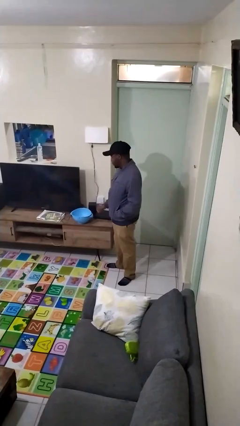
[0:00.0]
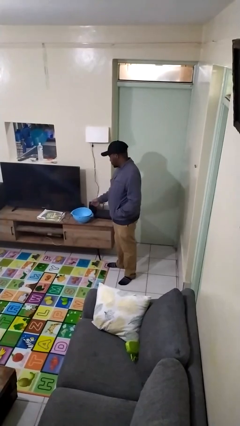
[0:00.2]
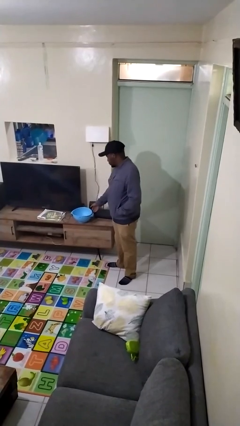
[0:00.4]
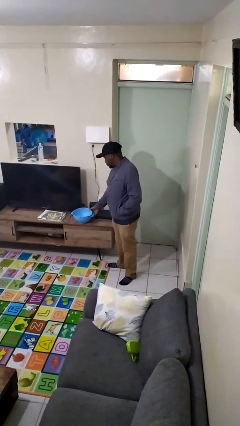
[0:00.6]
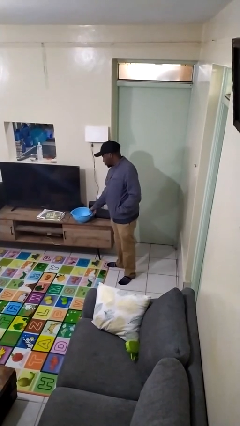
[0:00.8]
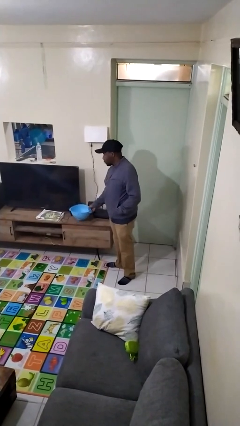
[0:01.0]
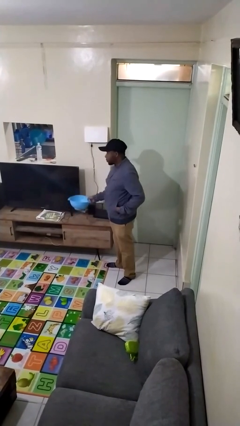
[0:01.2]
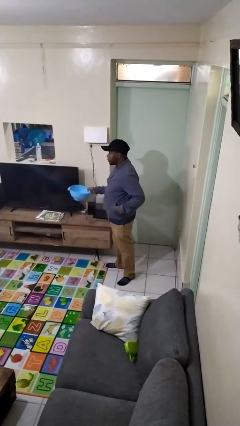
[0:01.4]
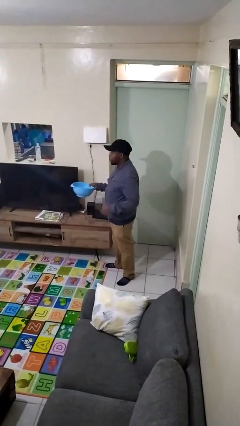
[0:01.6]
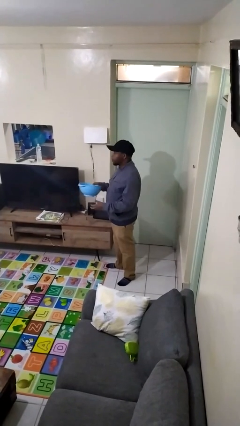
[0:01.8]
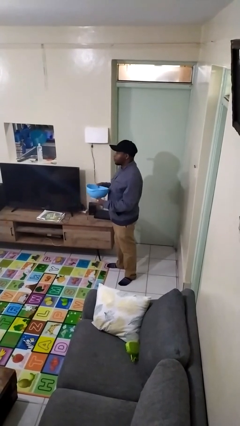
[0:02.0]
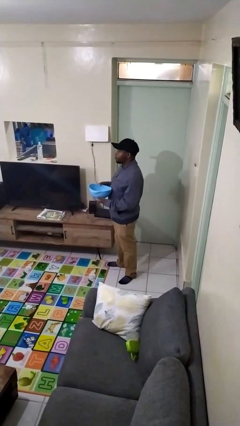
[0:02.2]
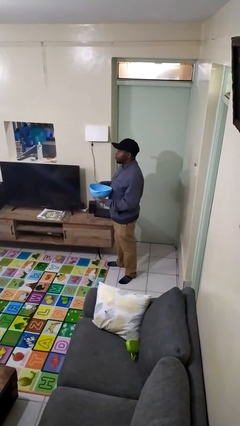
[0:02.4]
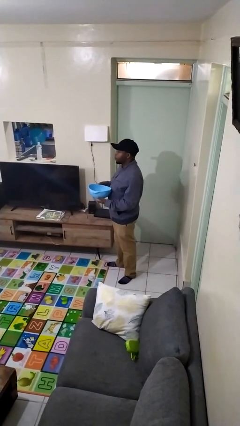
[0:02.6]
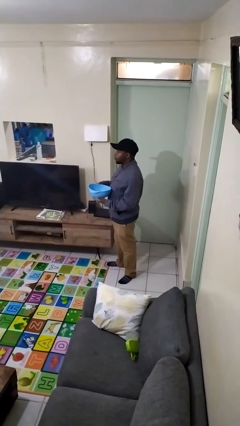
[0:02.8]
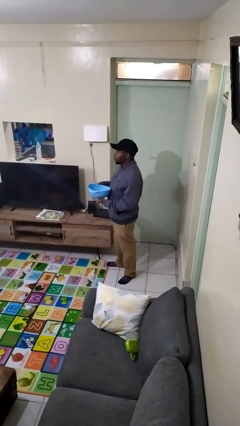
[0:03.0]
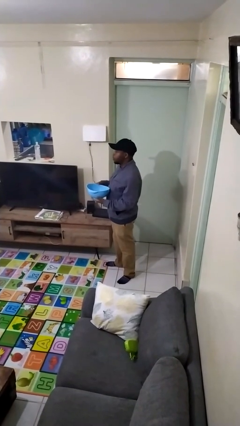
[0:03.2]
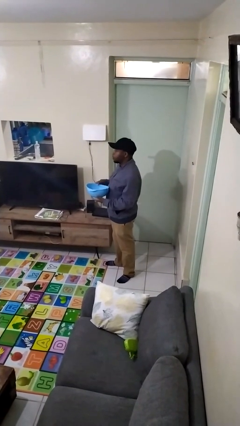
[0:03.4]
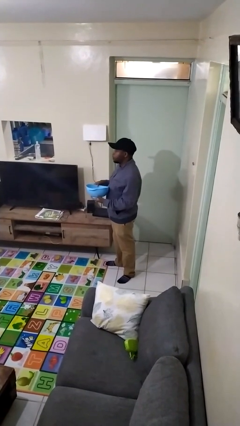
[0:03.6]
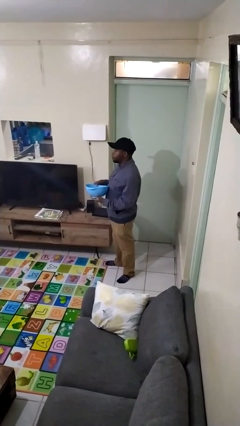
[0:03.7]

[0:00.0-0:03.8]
person picks up object from countertop

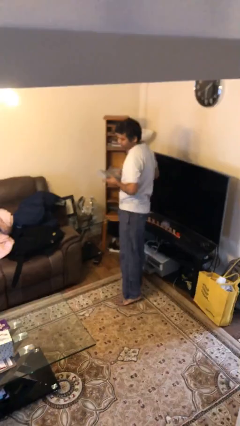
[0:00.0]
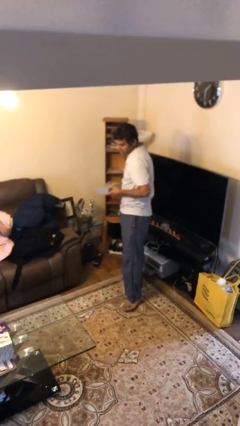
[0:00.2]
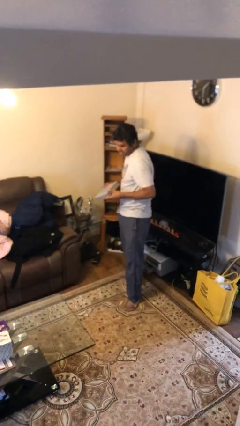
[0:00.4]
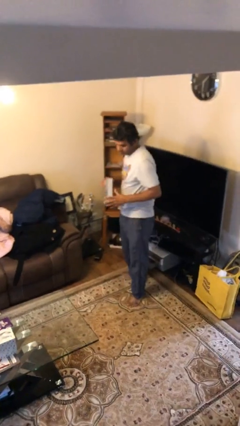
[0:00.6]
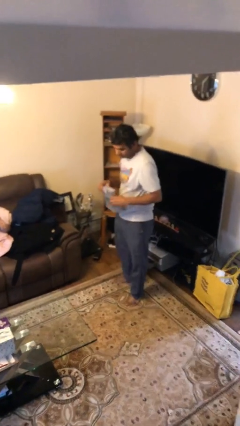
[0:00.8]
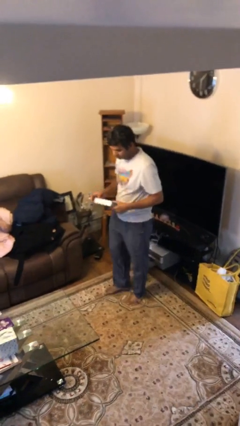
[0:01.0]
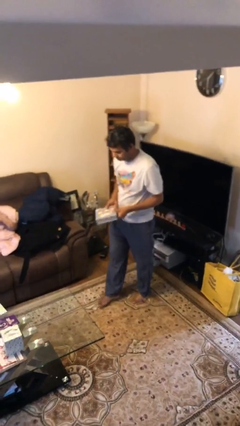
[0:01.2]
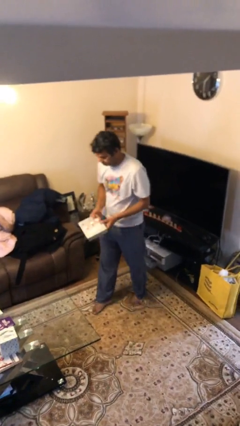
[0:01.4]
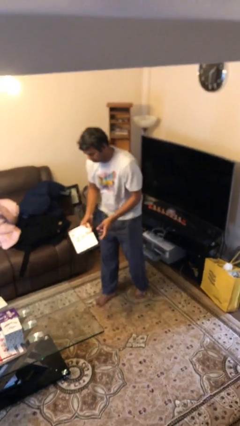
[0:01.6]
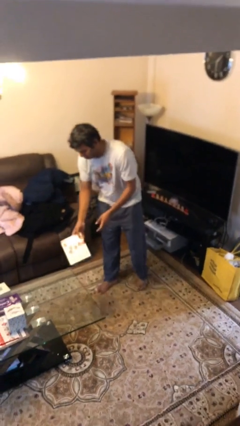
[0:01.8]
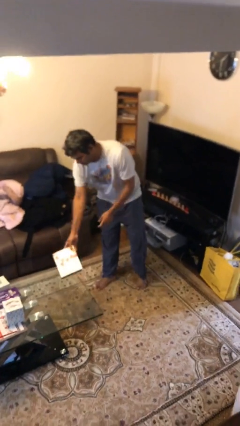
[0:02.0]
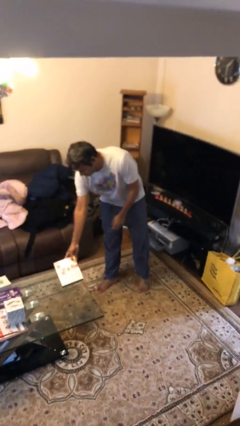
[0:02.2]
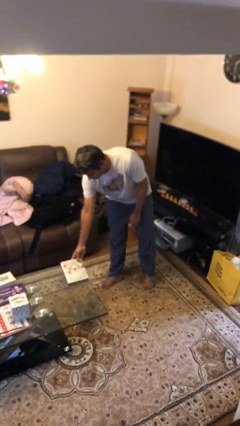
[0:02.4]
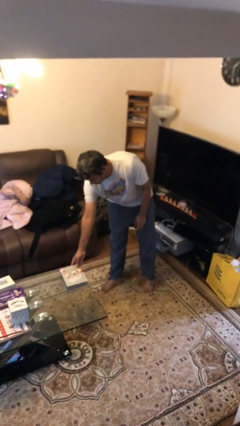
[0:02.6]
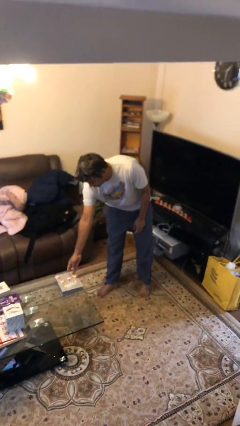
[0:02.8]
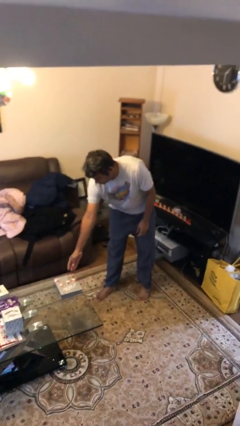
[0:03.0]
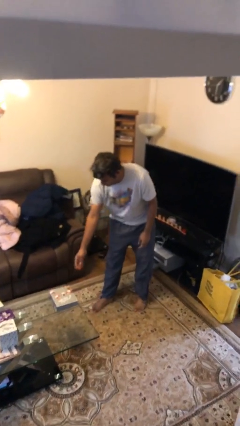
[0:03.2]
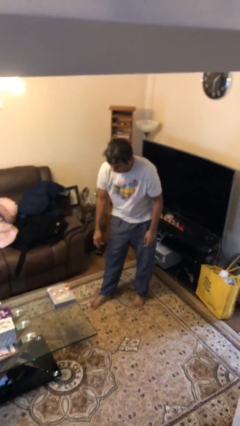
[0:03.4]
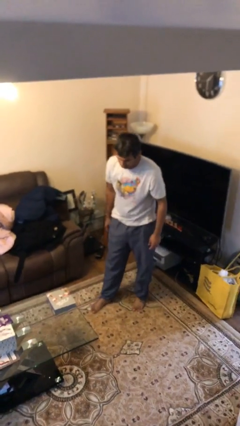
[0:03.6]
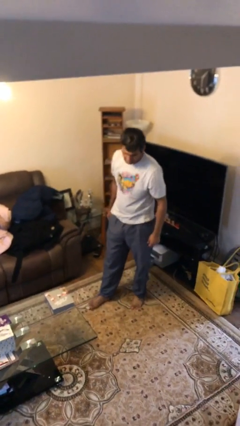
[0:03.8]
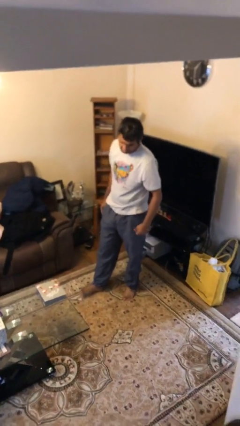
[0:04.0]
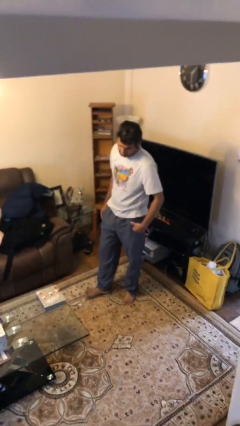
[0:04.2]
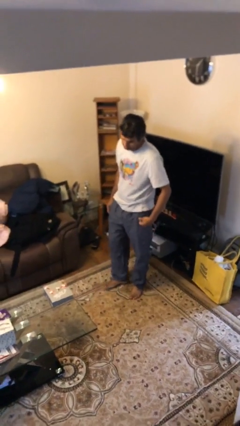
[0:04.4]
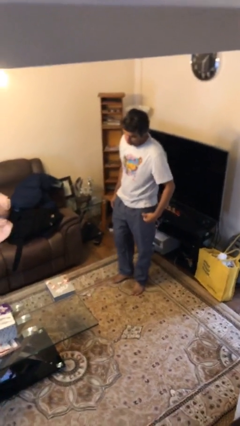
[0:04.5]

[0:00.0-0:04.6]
person puts down object on table

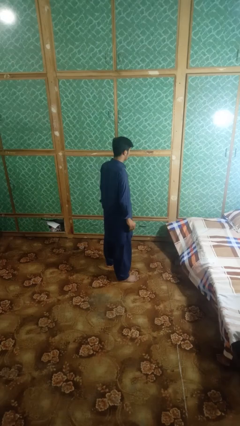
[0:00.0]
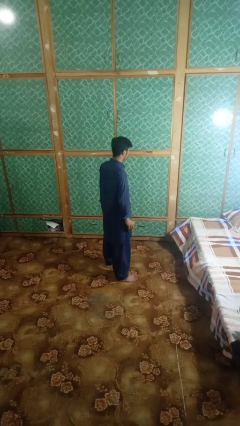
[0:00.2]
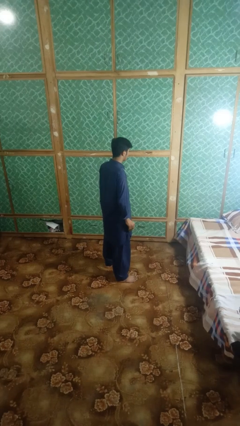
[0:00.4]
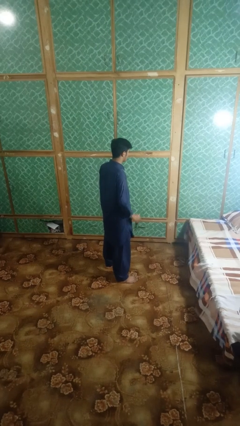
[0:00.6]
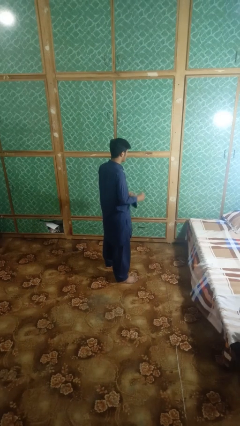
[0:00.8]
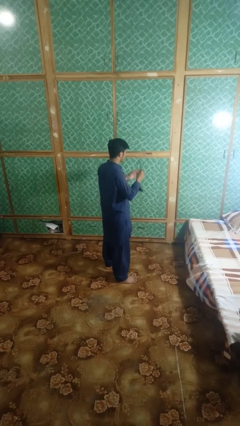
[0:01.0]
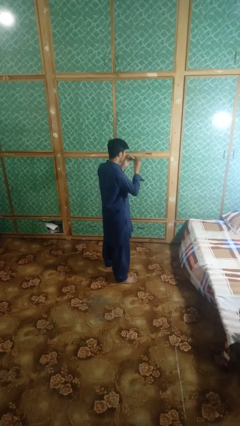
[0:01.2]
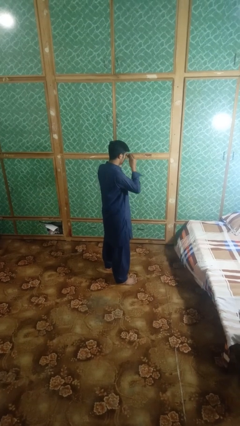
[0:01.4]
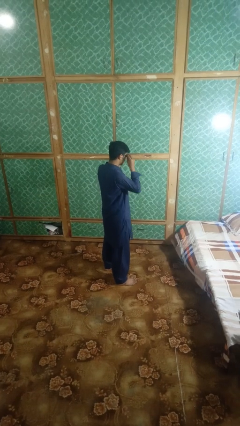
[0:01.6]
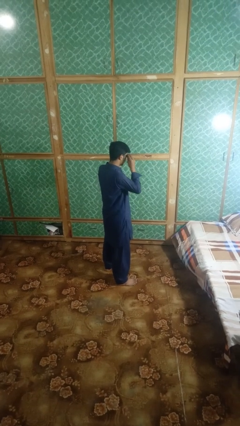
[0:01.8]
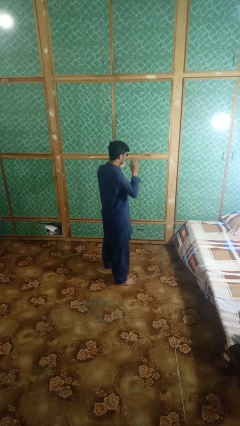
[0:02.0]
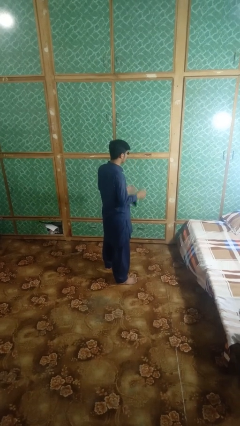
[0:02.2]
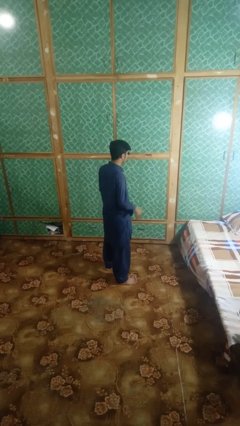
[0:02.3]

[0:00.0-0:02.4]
person puts on sunglasses

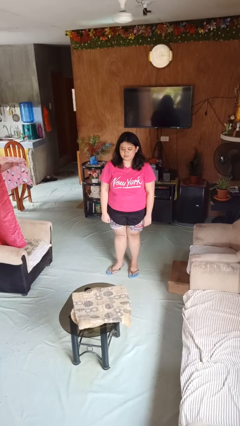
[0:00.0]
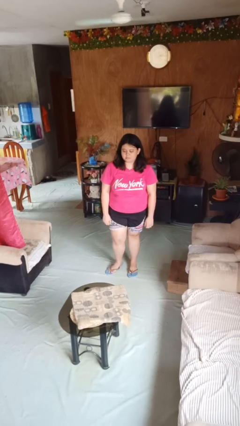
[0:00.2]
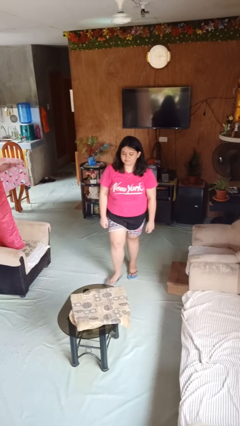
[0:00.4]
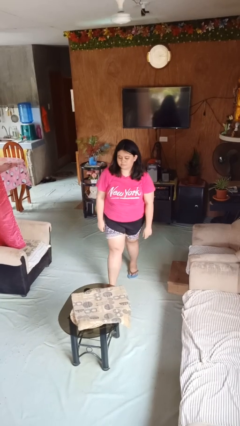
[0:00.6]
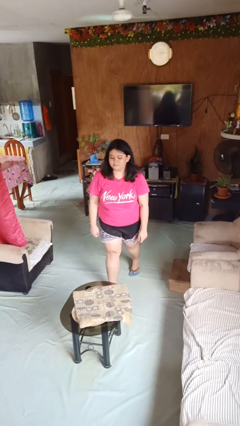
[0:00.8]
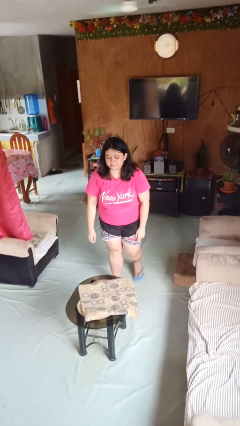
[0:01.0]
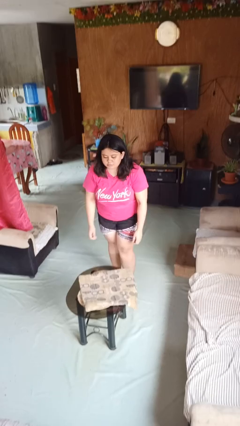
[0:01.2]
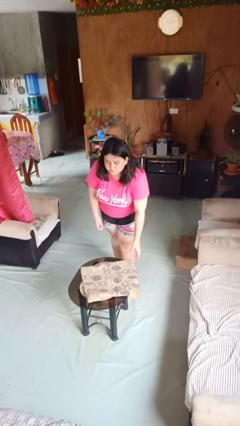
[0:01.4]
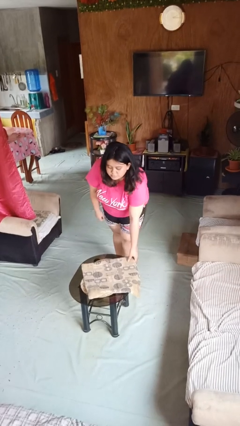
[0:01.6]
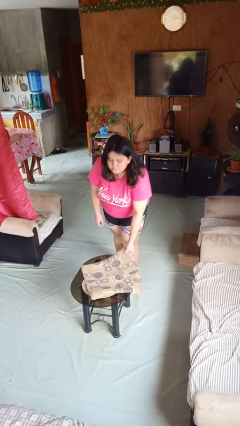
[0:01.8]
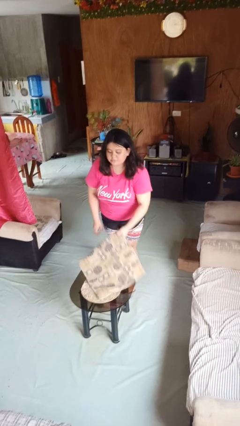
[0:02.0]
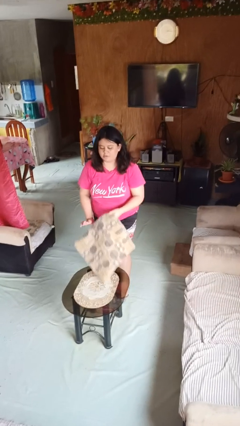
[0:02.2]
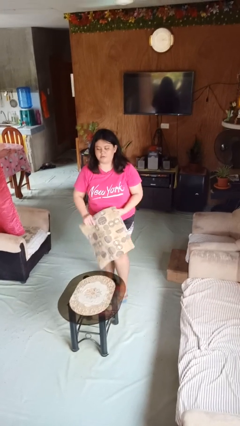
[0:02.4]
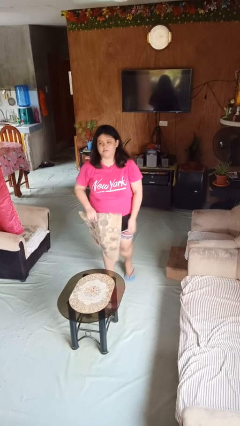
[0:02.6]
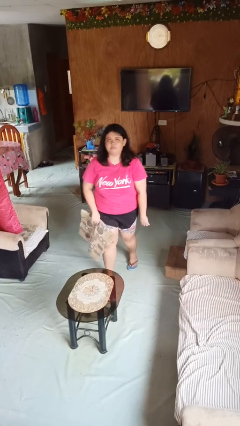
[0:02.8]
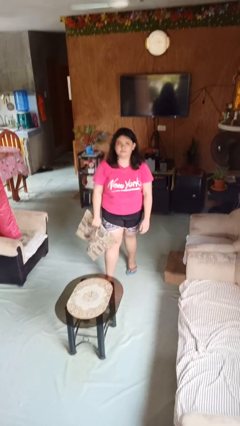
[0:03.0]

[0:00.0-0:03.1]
person picks up object from table

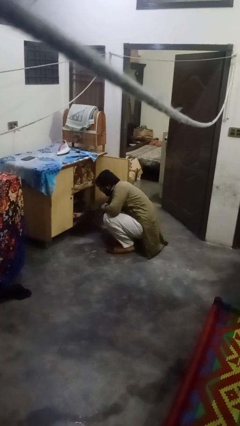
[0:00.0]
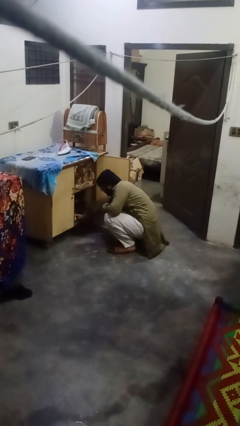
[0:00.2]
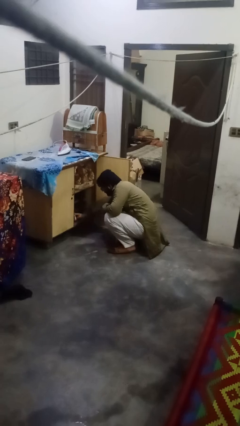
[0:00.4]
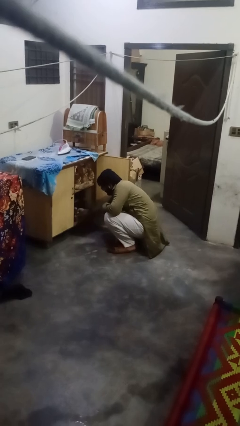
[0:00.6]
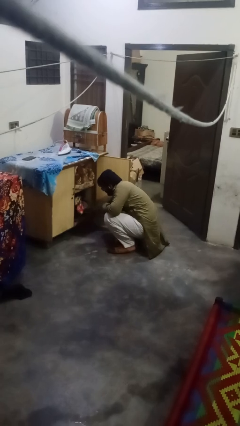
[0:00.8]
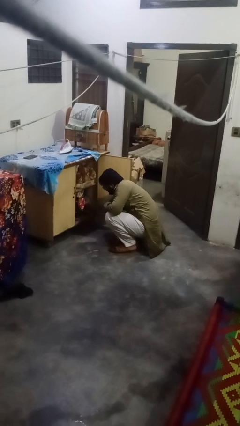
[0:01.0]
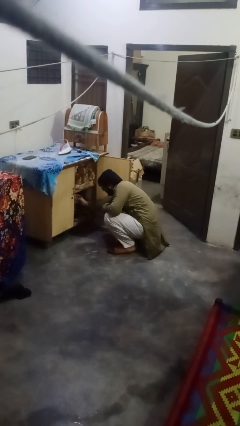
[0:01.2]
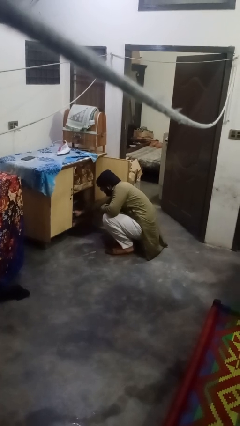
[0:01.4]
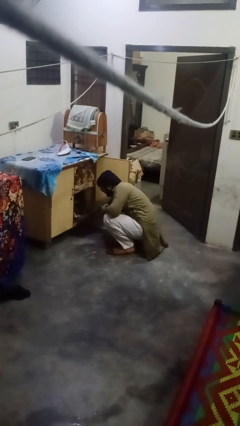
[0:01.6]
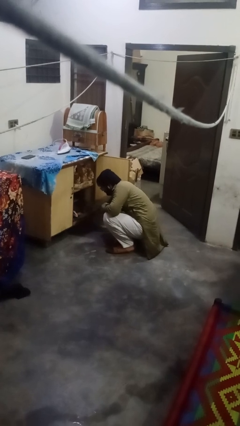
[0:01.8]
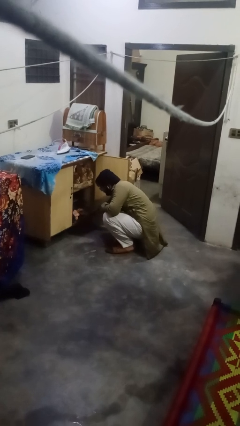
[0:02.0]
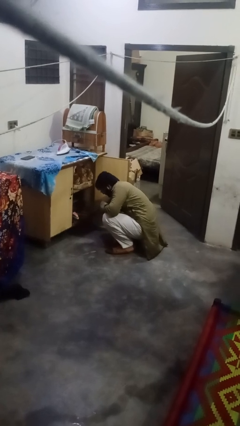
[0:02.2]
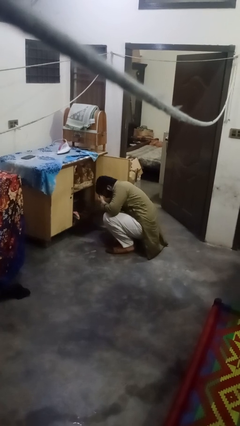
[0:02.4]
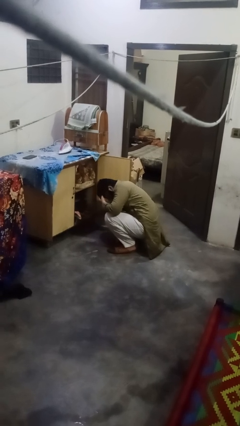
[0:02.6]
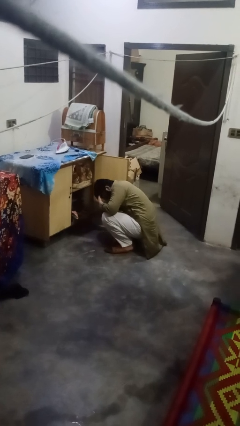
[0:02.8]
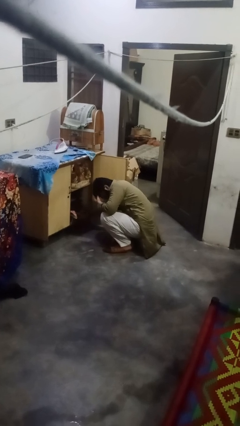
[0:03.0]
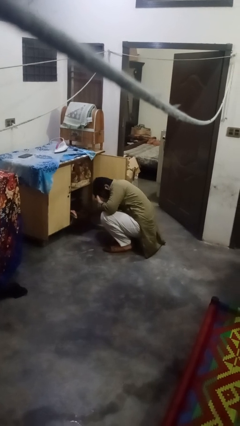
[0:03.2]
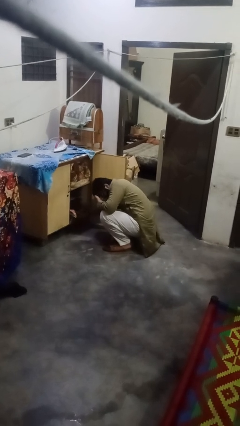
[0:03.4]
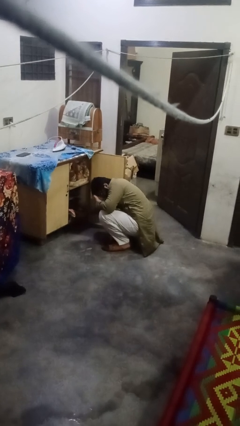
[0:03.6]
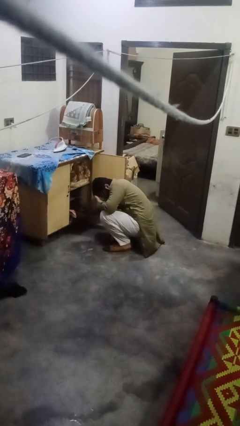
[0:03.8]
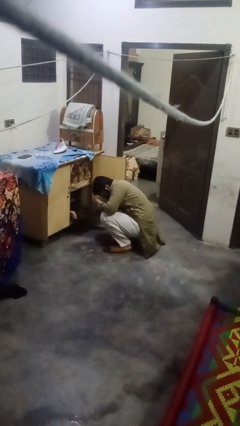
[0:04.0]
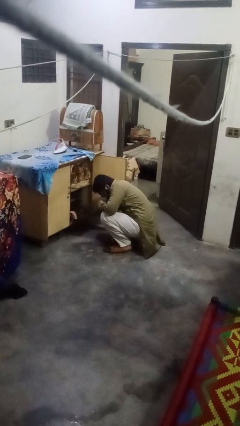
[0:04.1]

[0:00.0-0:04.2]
person searches in cabinet
